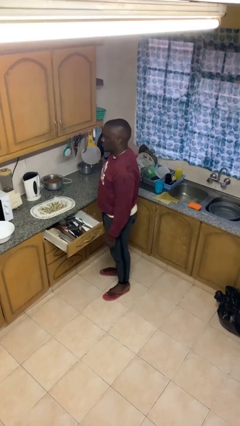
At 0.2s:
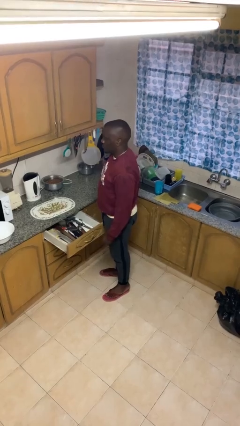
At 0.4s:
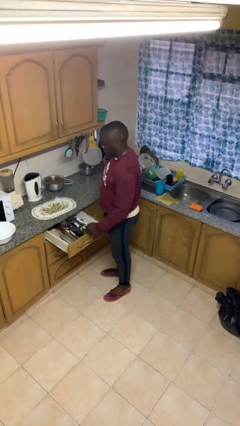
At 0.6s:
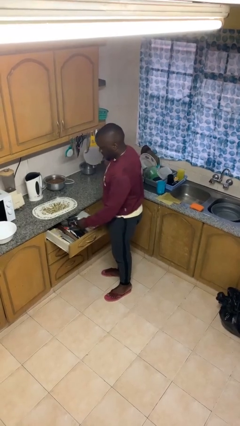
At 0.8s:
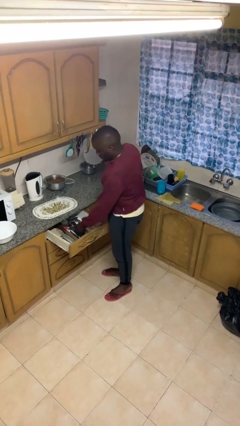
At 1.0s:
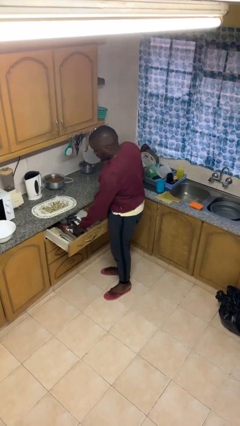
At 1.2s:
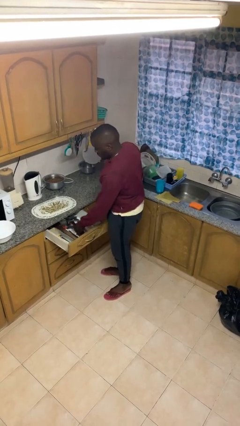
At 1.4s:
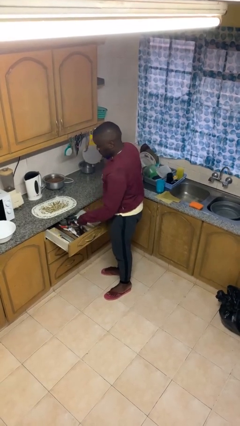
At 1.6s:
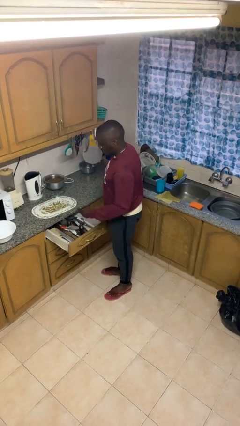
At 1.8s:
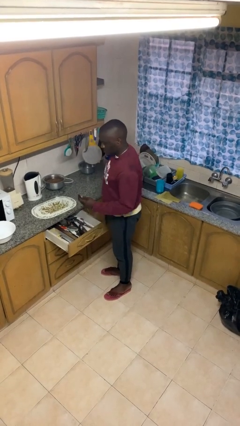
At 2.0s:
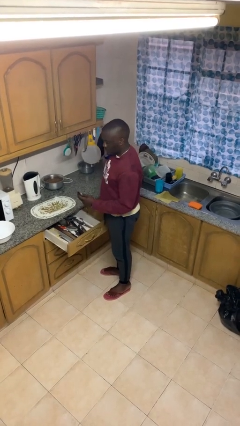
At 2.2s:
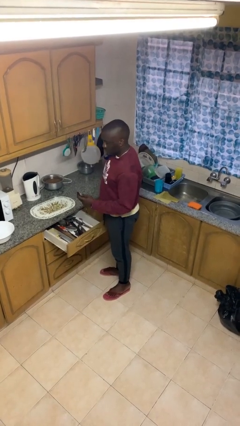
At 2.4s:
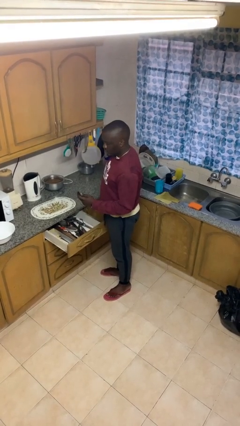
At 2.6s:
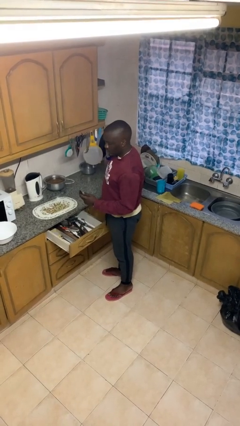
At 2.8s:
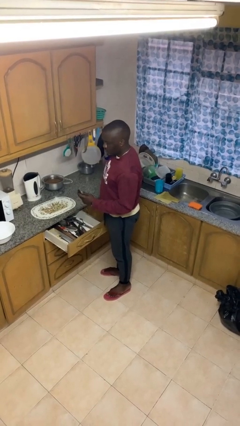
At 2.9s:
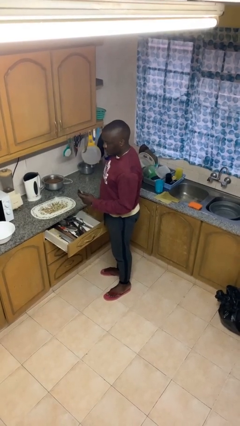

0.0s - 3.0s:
person takes object from kitchen drawer

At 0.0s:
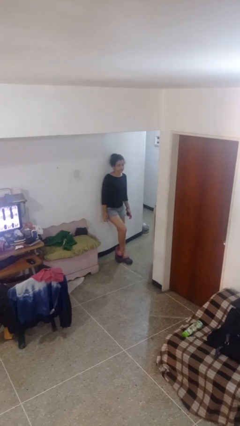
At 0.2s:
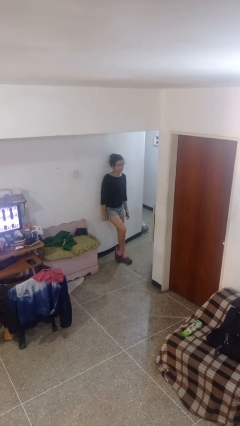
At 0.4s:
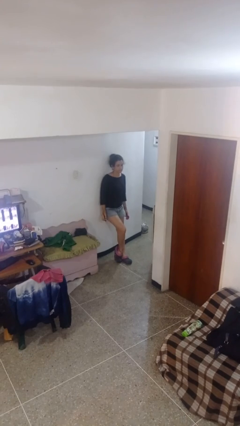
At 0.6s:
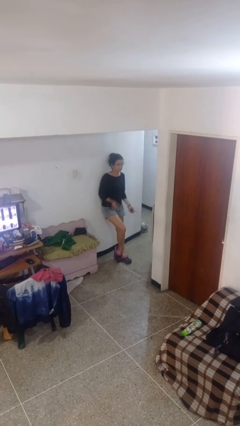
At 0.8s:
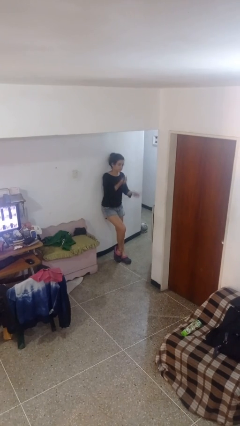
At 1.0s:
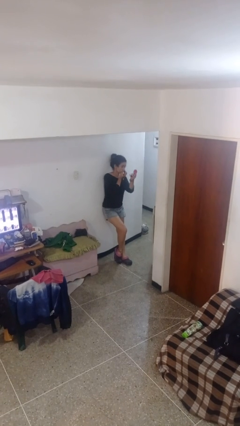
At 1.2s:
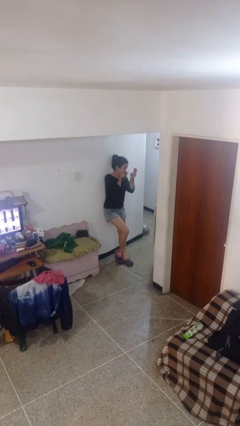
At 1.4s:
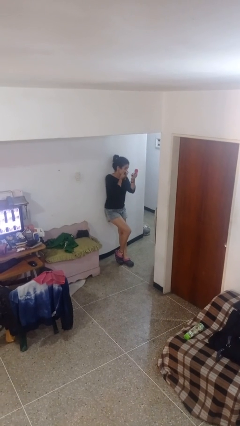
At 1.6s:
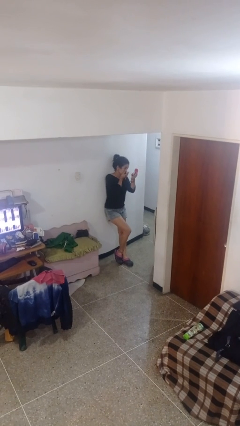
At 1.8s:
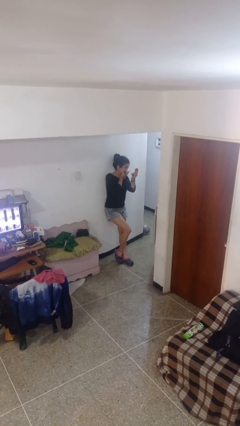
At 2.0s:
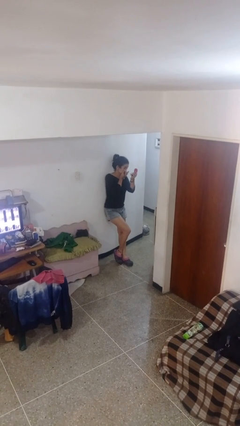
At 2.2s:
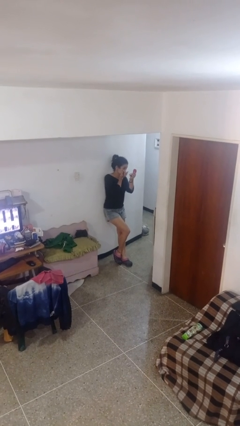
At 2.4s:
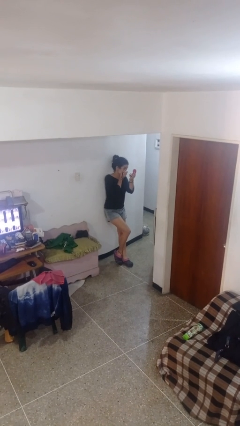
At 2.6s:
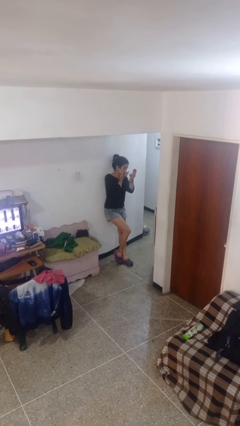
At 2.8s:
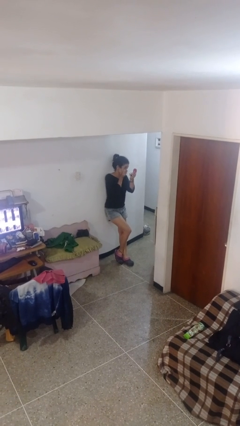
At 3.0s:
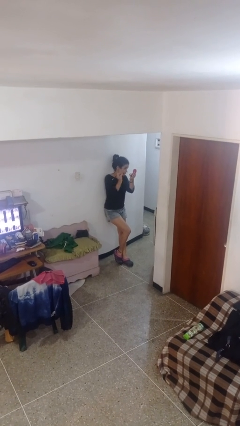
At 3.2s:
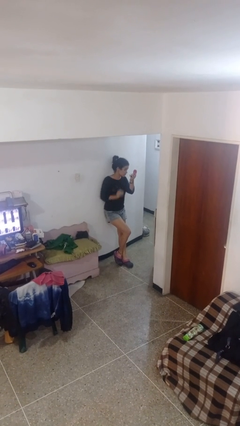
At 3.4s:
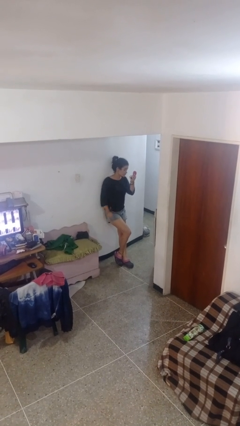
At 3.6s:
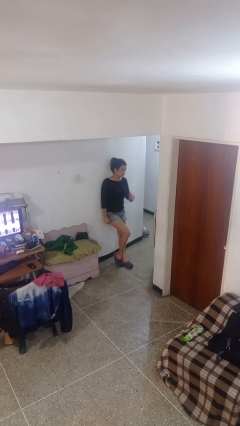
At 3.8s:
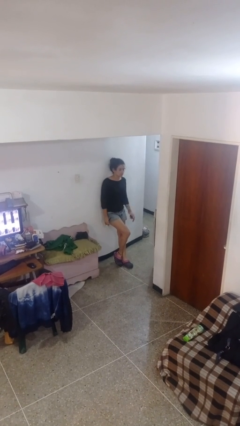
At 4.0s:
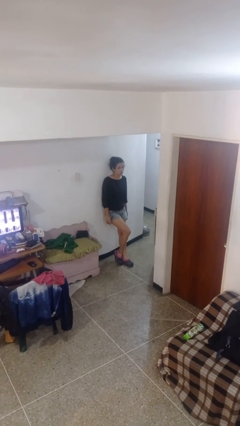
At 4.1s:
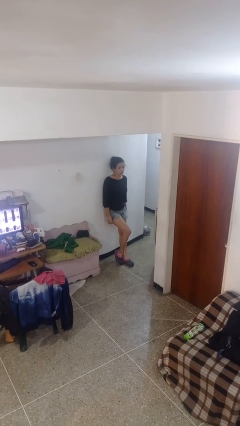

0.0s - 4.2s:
person applies eye makeup

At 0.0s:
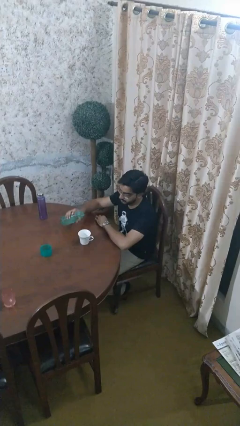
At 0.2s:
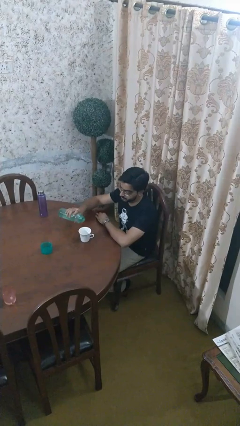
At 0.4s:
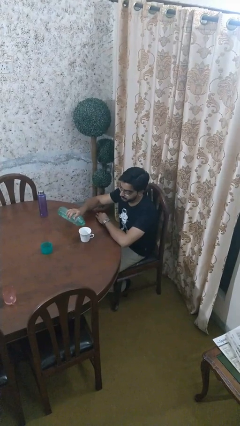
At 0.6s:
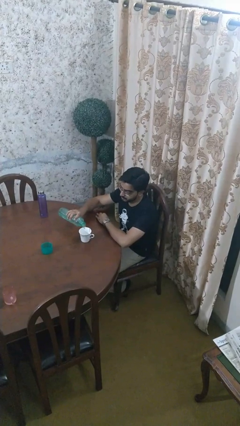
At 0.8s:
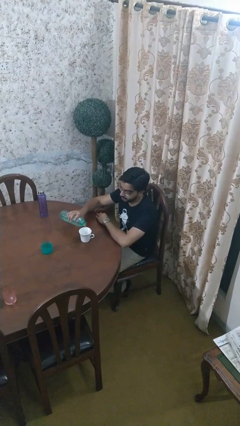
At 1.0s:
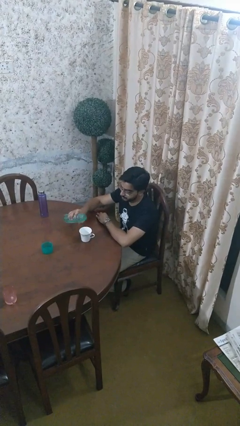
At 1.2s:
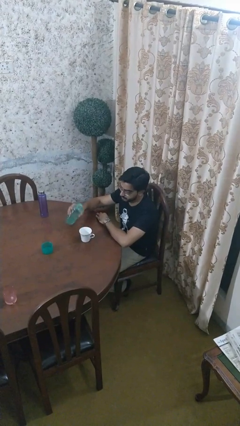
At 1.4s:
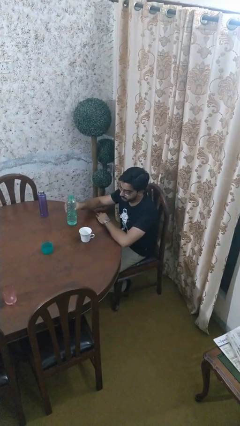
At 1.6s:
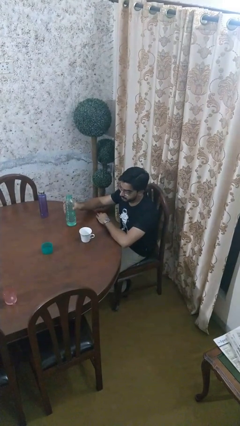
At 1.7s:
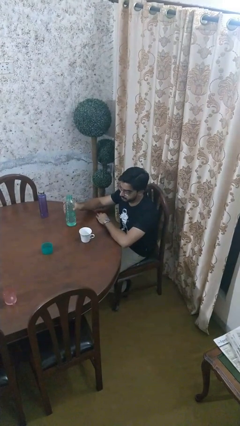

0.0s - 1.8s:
person pours liquid into cup

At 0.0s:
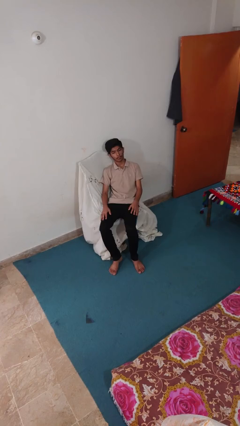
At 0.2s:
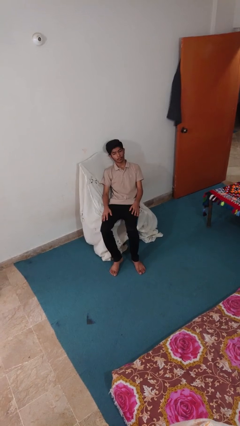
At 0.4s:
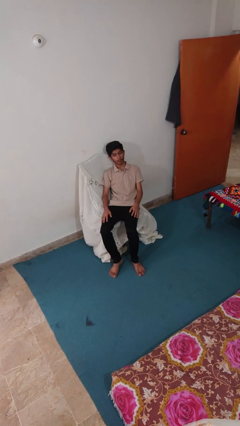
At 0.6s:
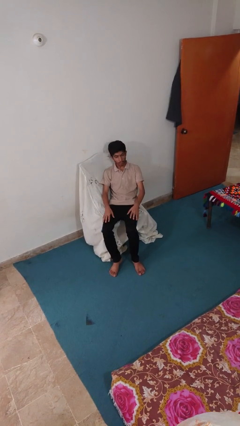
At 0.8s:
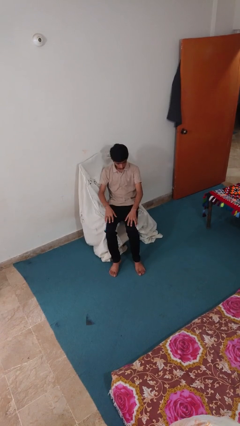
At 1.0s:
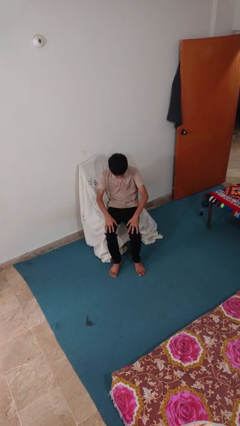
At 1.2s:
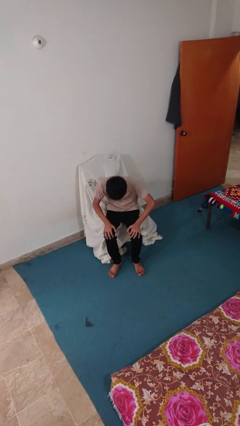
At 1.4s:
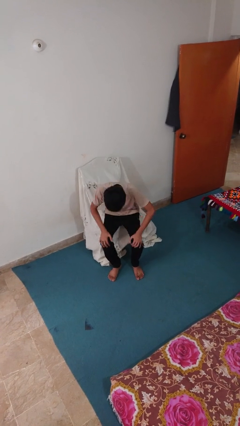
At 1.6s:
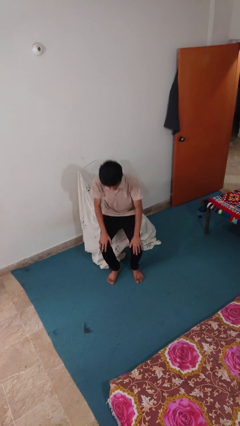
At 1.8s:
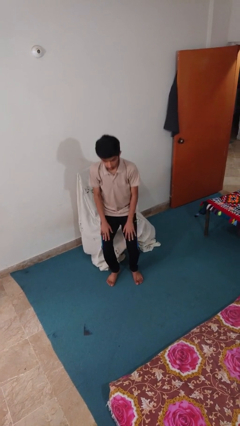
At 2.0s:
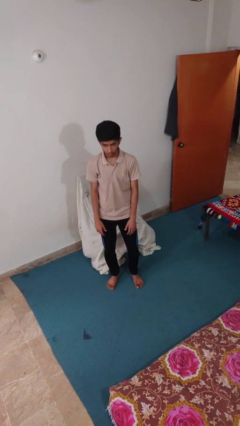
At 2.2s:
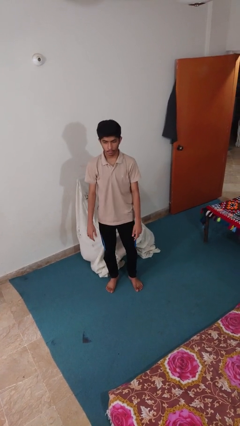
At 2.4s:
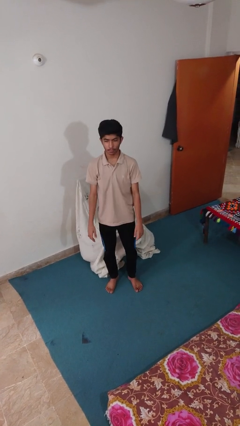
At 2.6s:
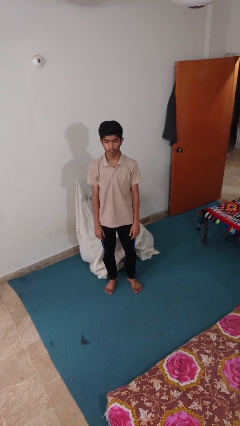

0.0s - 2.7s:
person stands up

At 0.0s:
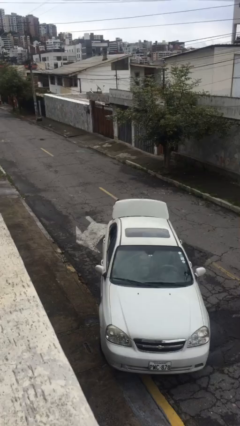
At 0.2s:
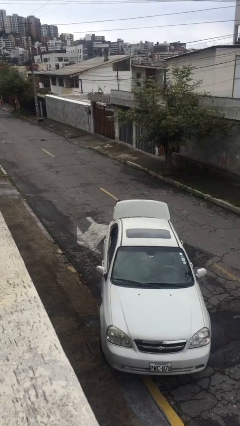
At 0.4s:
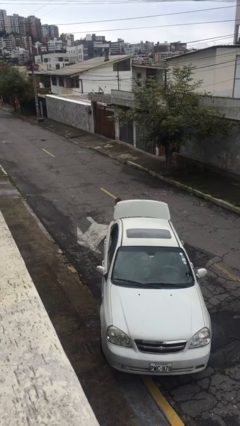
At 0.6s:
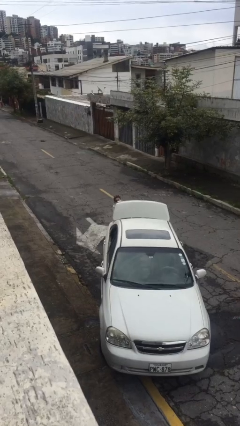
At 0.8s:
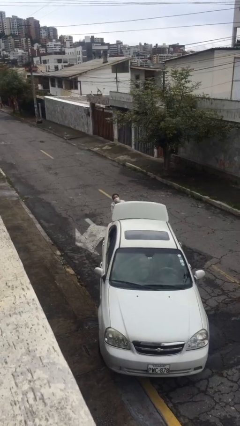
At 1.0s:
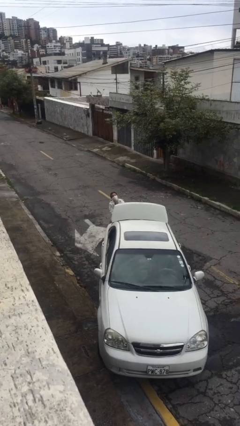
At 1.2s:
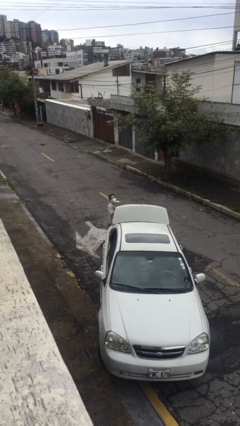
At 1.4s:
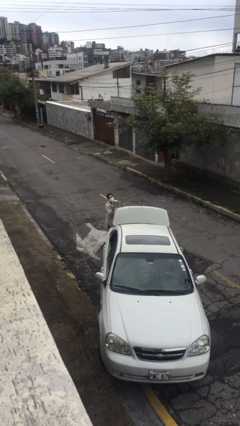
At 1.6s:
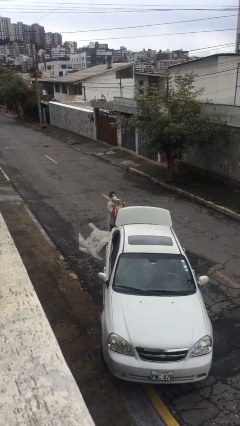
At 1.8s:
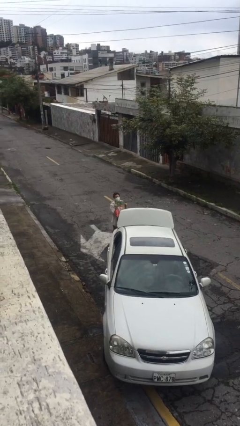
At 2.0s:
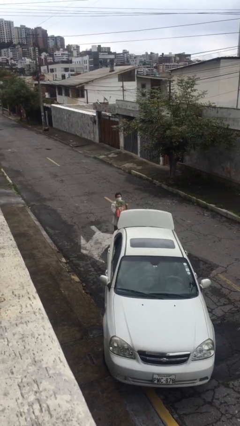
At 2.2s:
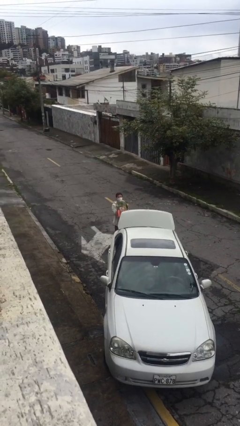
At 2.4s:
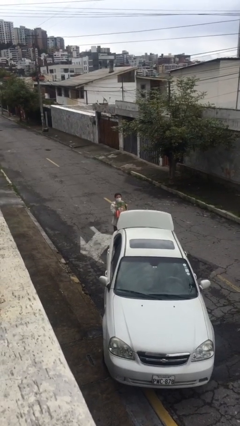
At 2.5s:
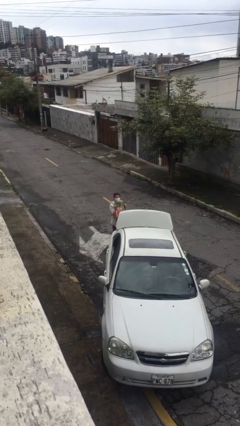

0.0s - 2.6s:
person unloads car

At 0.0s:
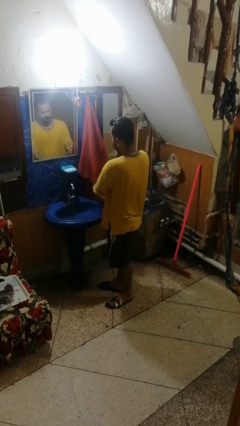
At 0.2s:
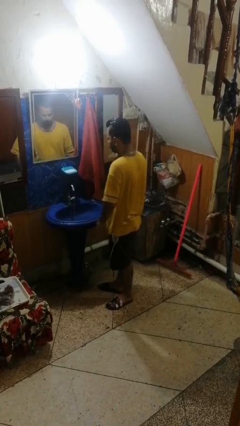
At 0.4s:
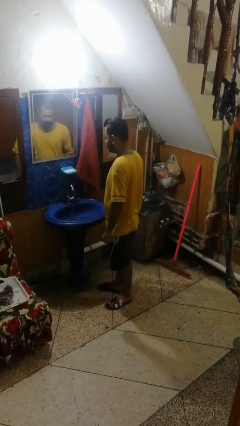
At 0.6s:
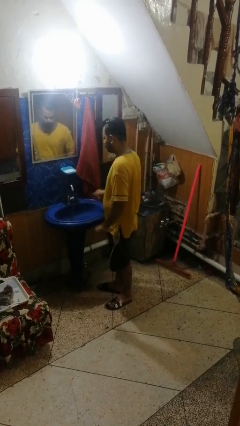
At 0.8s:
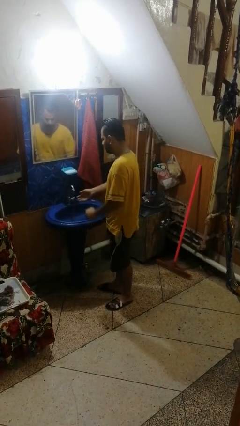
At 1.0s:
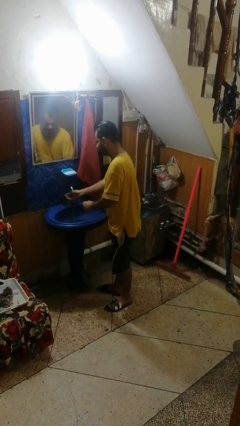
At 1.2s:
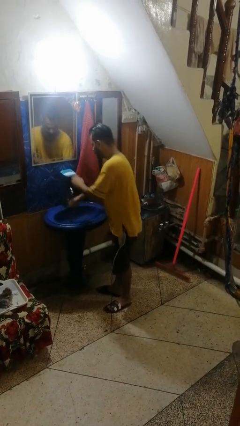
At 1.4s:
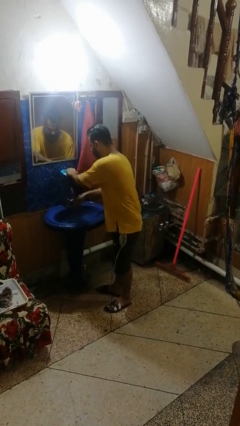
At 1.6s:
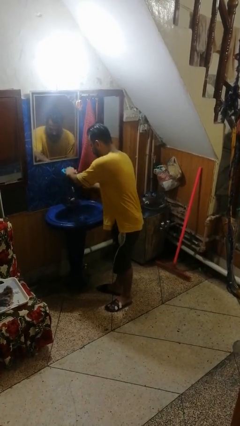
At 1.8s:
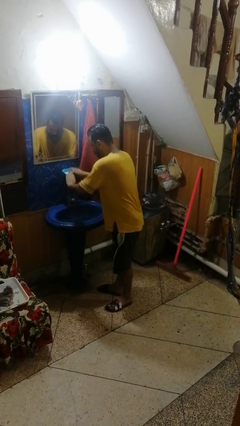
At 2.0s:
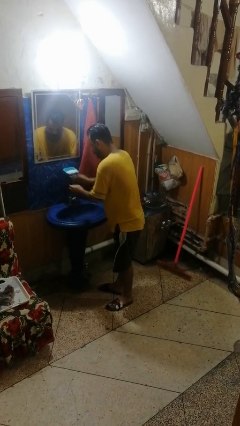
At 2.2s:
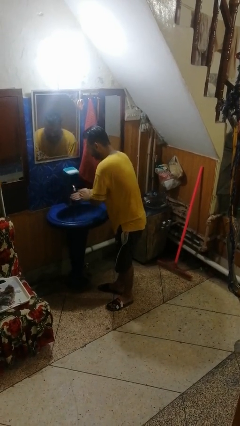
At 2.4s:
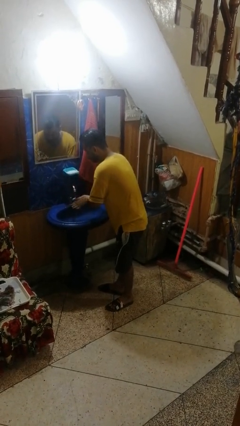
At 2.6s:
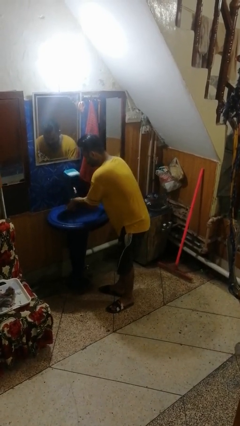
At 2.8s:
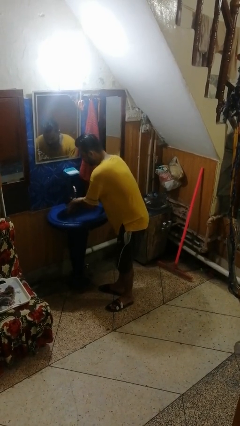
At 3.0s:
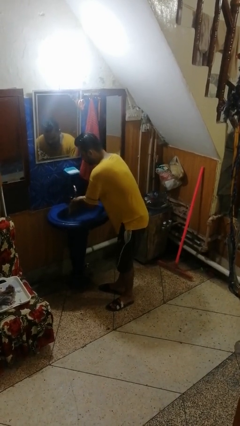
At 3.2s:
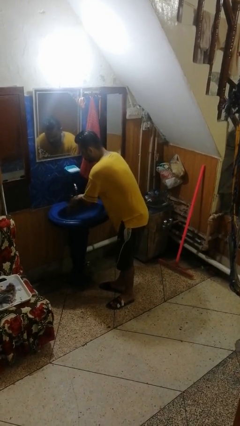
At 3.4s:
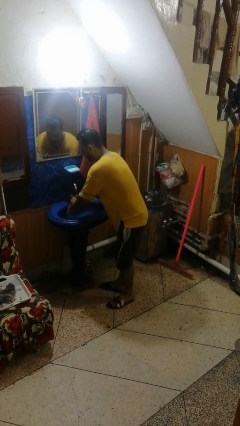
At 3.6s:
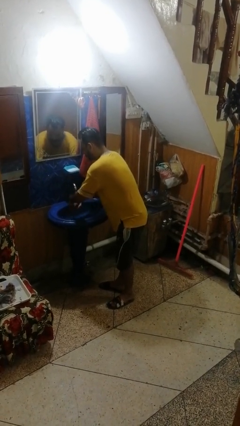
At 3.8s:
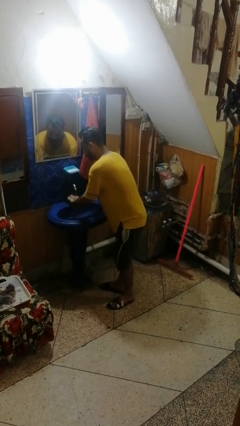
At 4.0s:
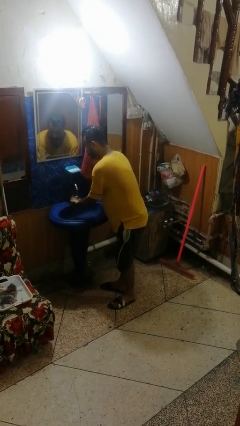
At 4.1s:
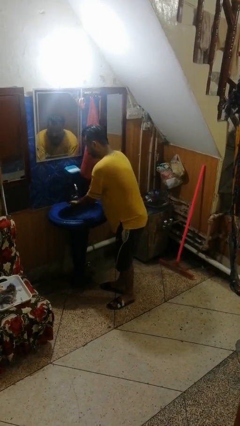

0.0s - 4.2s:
person washes hands
